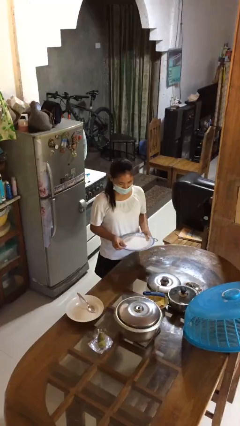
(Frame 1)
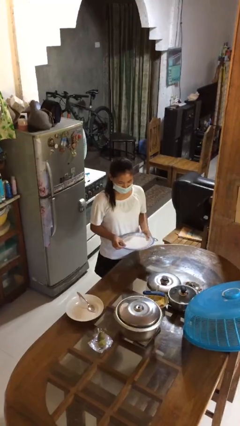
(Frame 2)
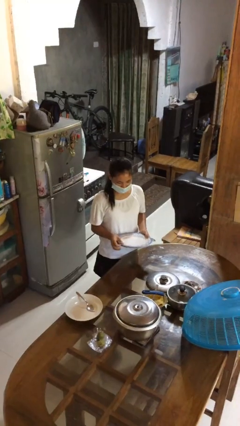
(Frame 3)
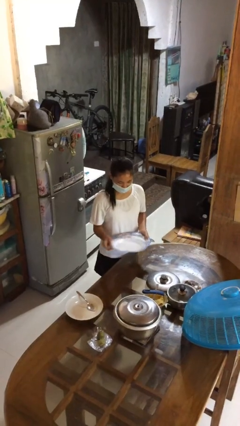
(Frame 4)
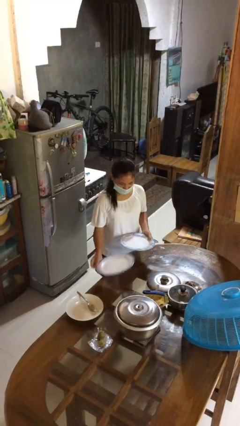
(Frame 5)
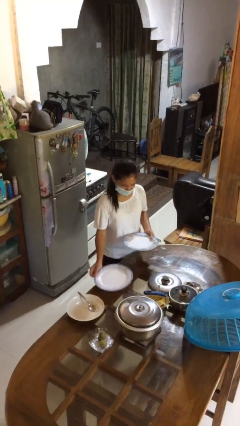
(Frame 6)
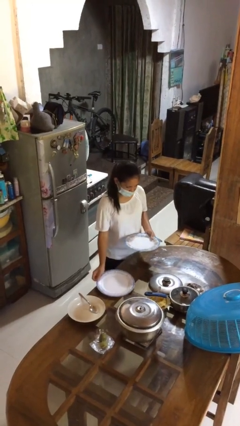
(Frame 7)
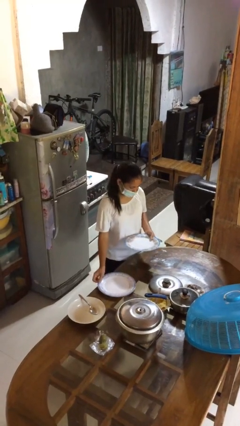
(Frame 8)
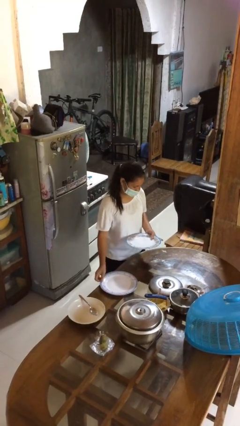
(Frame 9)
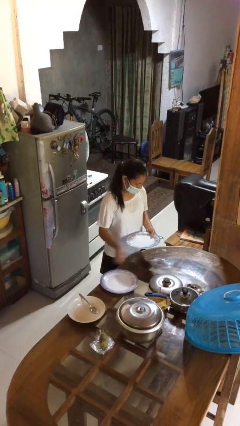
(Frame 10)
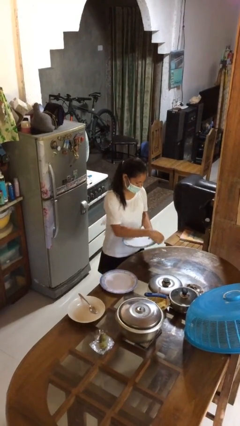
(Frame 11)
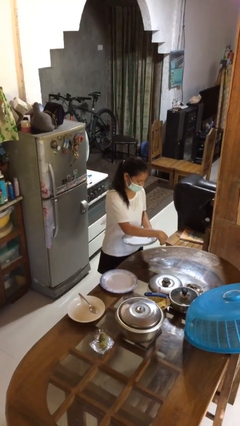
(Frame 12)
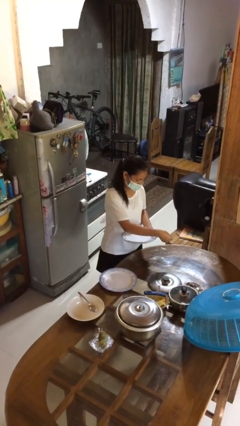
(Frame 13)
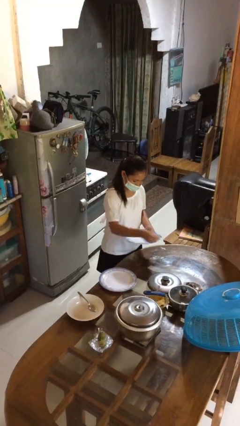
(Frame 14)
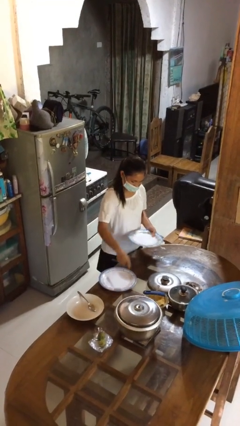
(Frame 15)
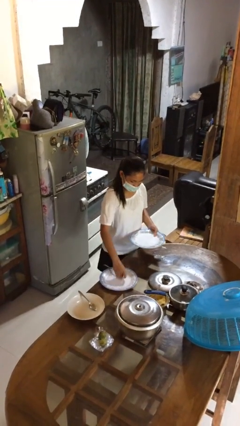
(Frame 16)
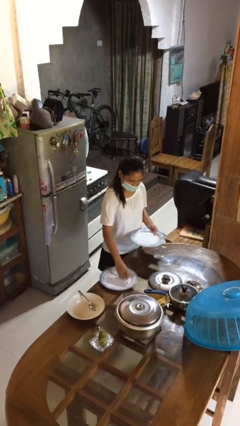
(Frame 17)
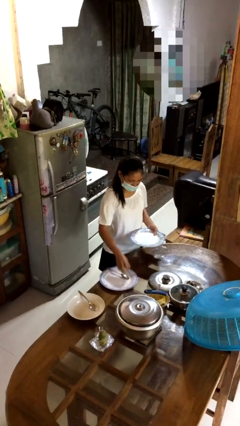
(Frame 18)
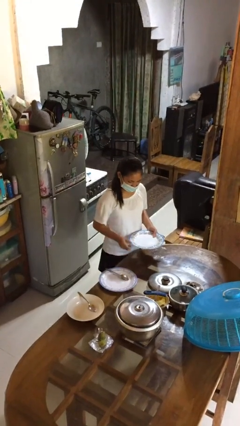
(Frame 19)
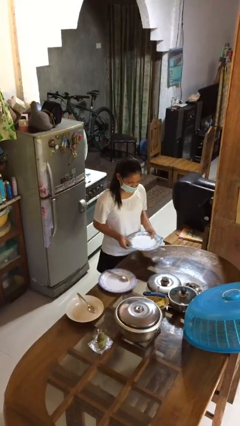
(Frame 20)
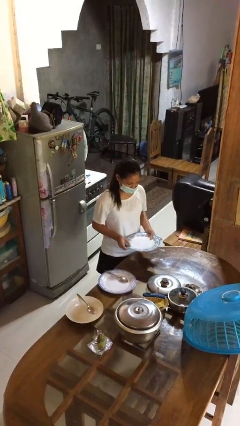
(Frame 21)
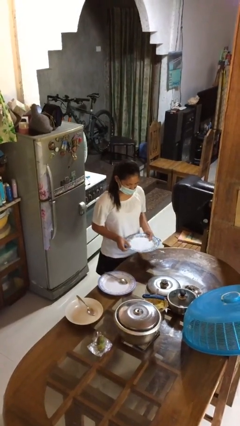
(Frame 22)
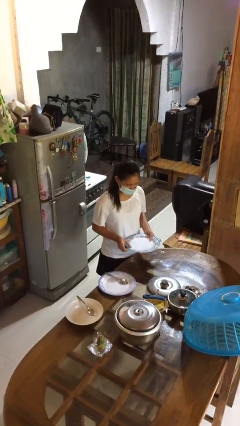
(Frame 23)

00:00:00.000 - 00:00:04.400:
person sets table

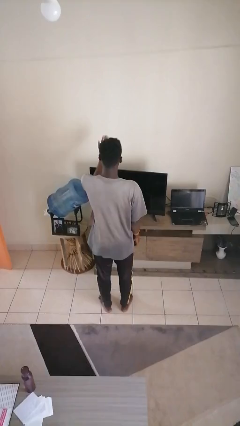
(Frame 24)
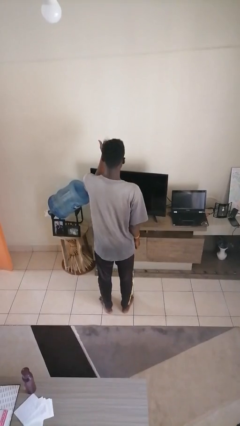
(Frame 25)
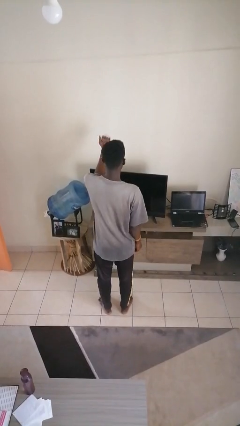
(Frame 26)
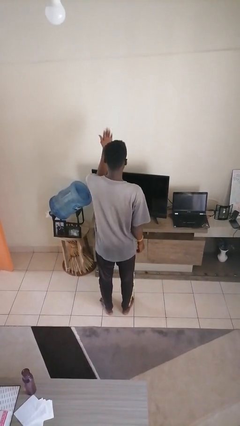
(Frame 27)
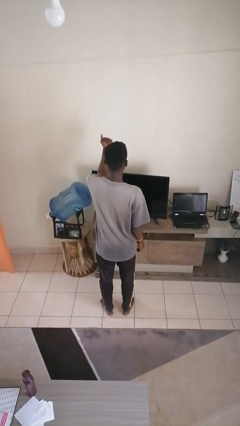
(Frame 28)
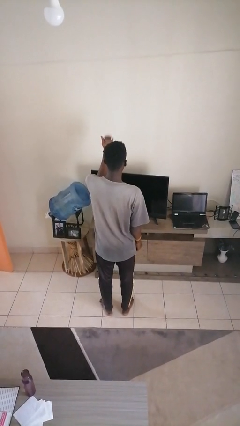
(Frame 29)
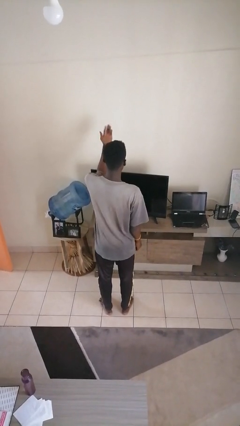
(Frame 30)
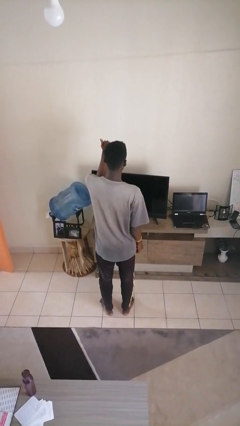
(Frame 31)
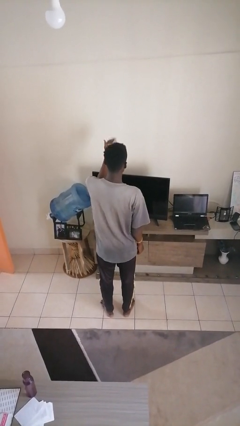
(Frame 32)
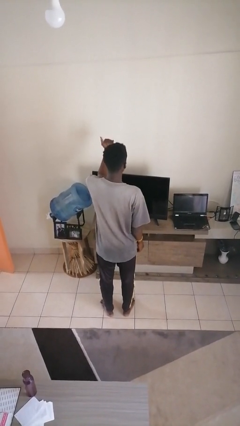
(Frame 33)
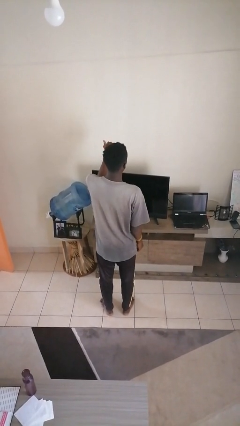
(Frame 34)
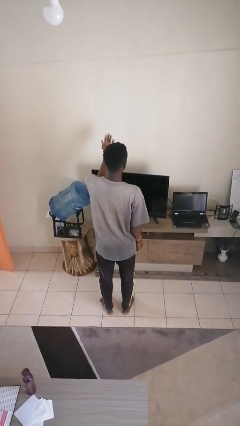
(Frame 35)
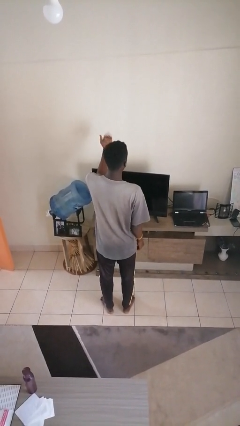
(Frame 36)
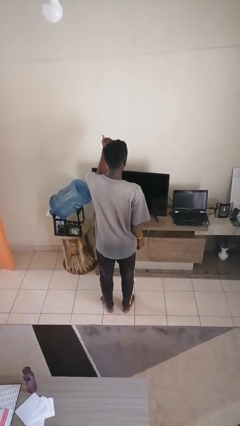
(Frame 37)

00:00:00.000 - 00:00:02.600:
person gestures come here

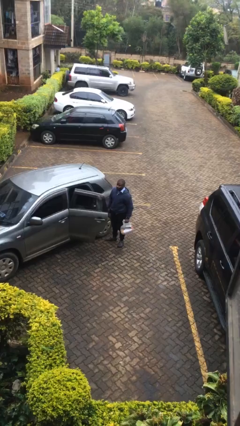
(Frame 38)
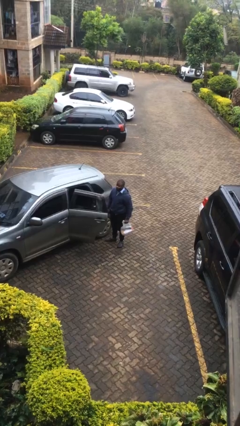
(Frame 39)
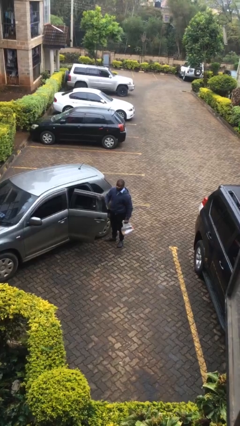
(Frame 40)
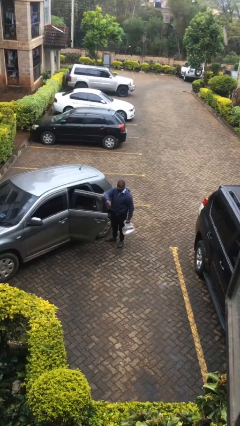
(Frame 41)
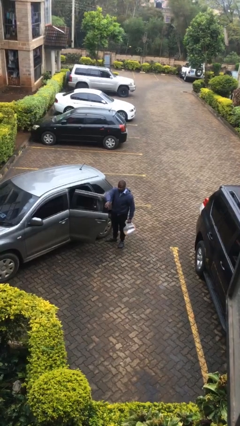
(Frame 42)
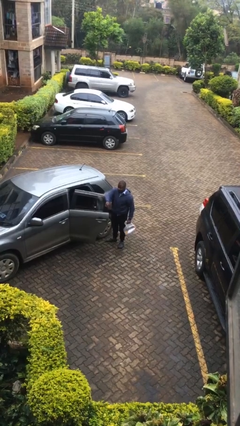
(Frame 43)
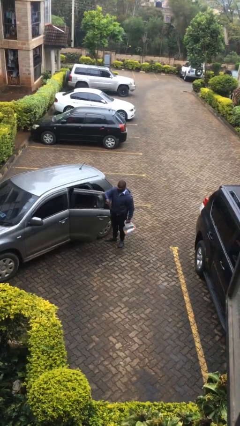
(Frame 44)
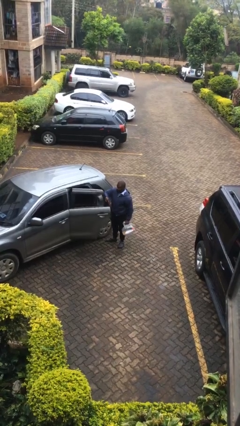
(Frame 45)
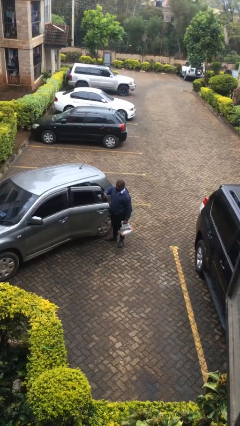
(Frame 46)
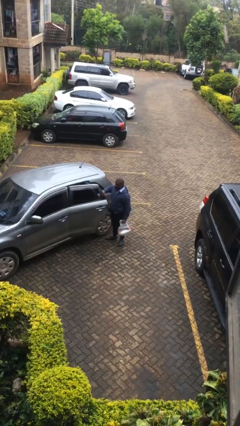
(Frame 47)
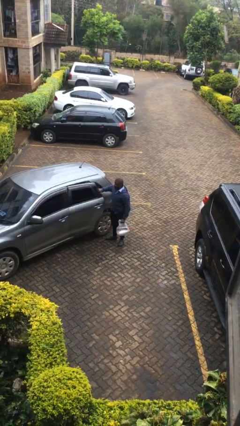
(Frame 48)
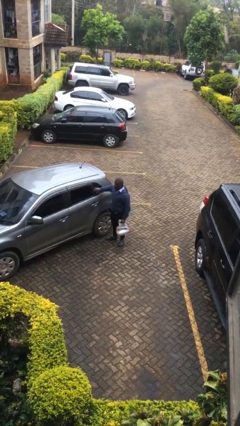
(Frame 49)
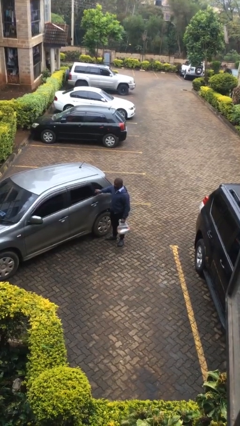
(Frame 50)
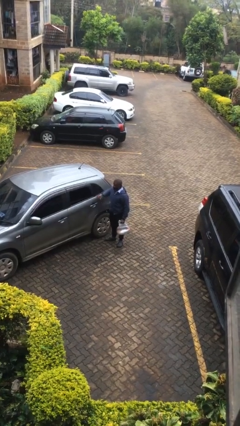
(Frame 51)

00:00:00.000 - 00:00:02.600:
person closes car door

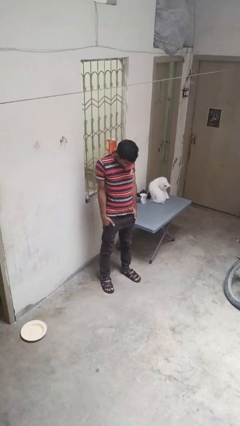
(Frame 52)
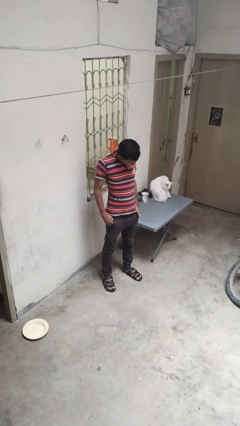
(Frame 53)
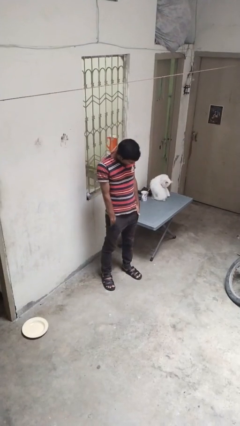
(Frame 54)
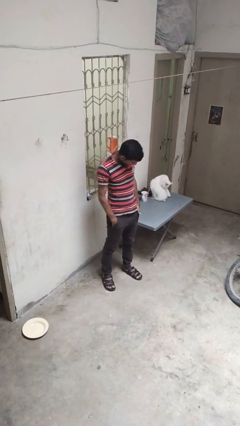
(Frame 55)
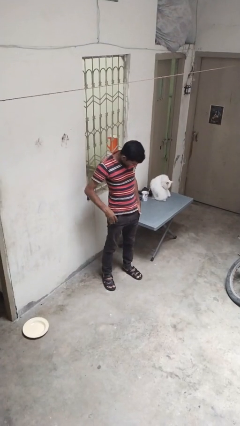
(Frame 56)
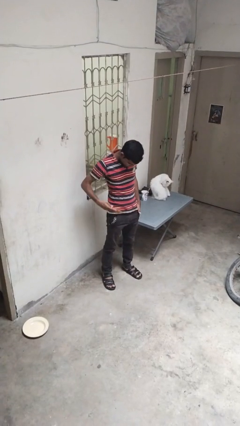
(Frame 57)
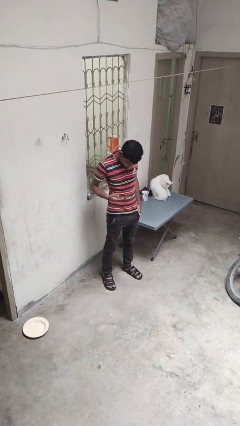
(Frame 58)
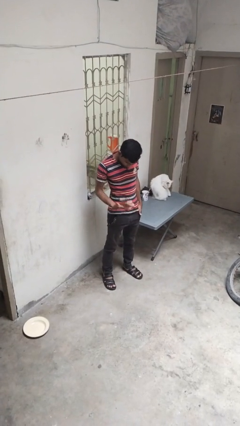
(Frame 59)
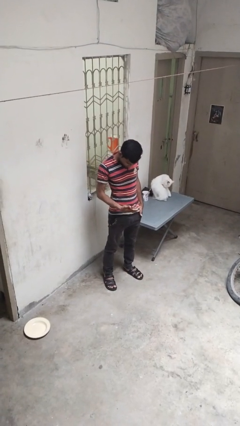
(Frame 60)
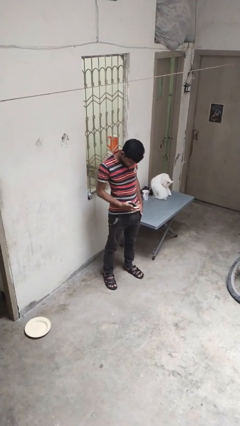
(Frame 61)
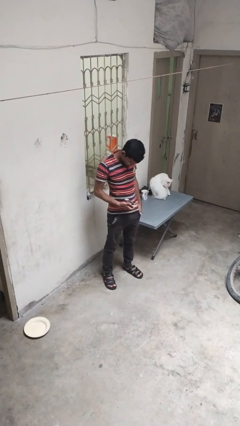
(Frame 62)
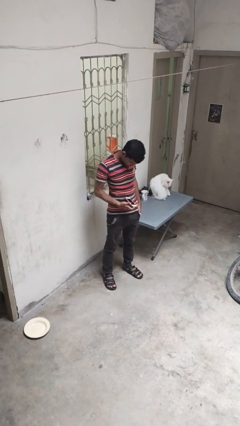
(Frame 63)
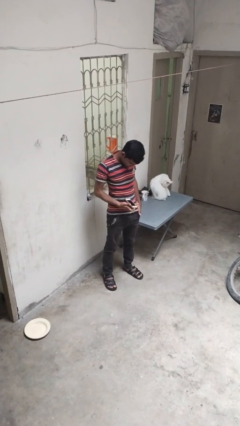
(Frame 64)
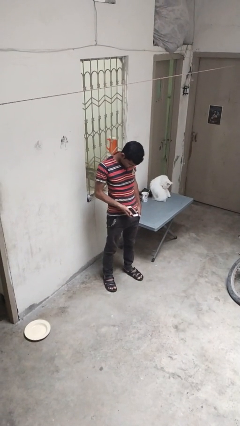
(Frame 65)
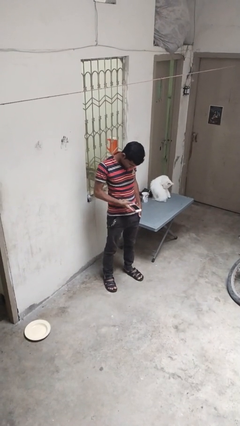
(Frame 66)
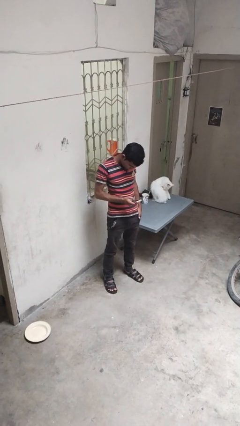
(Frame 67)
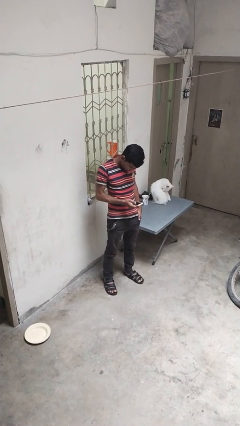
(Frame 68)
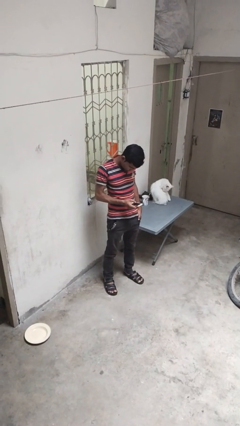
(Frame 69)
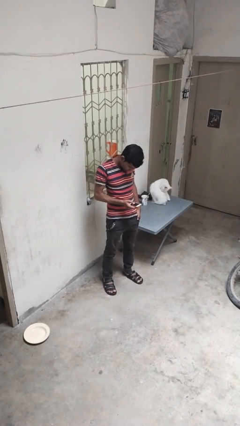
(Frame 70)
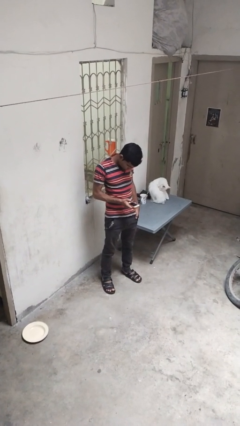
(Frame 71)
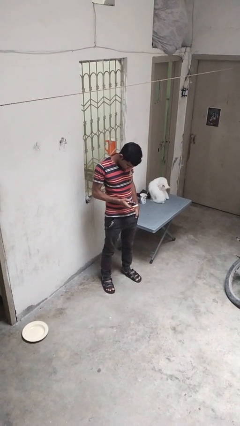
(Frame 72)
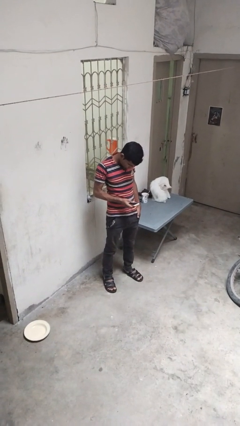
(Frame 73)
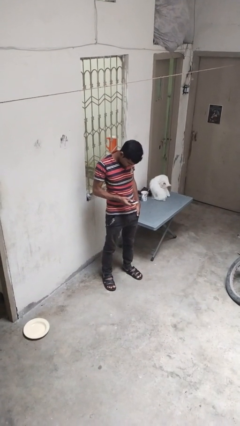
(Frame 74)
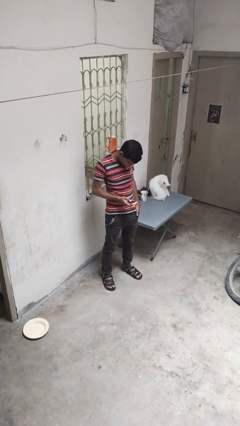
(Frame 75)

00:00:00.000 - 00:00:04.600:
person takes phone from pocket

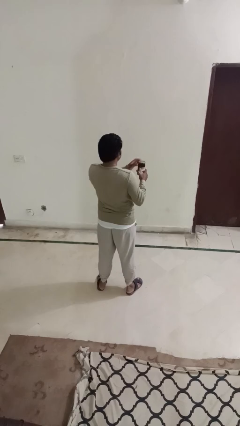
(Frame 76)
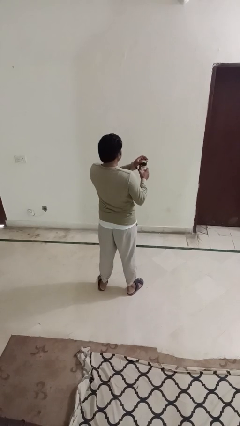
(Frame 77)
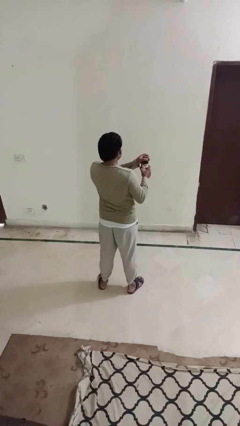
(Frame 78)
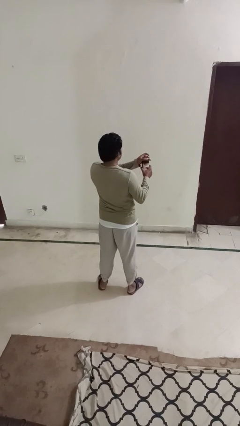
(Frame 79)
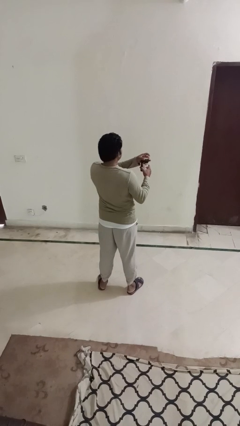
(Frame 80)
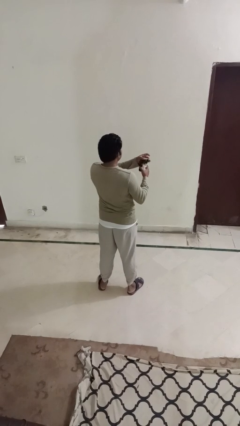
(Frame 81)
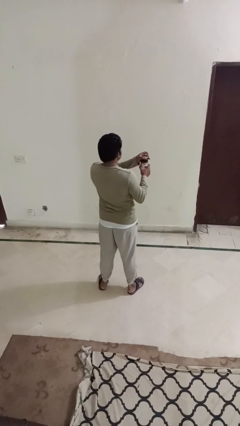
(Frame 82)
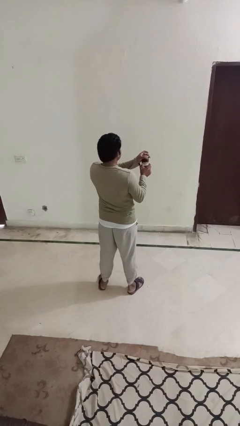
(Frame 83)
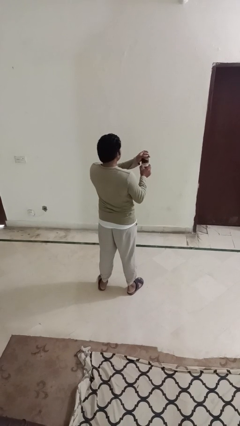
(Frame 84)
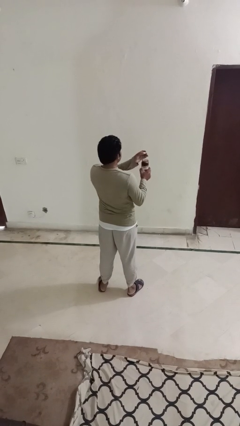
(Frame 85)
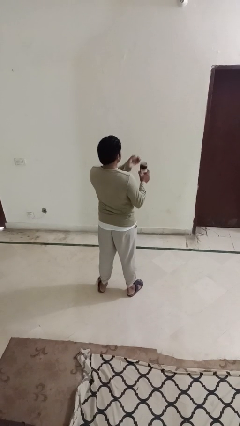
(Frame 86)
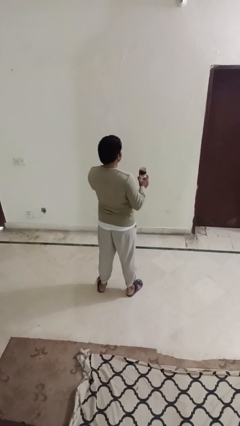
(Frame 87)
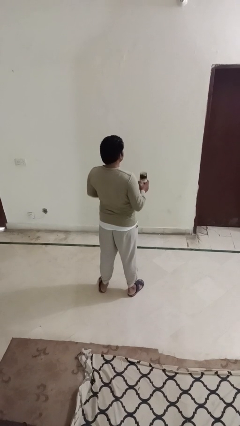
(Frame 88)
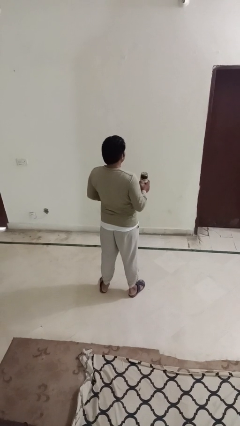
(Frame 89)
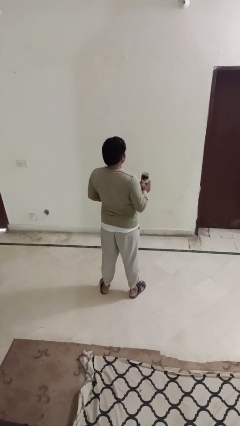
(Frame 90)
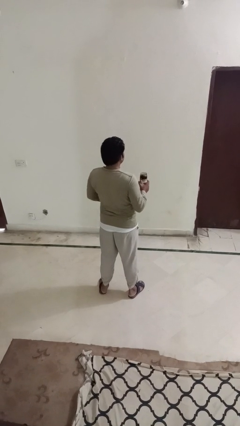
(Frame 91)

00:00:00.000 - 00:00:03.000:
person opens jar
